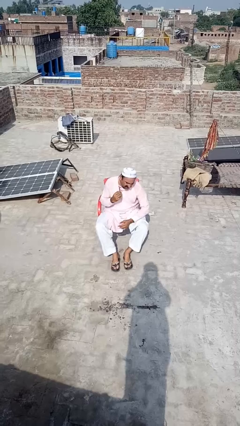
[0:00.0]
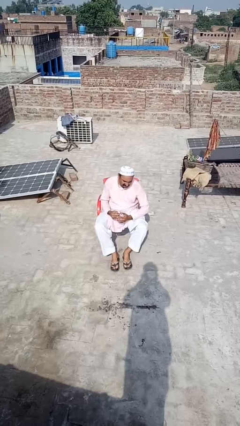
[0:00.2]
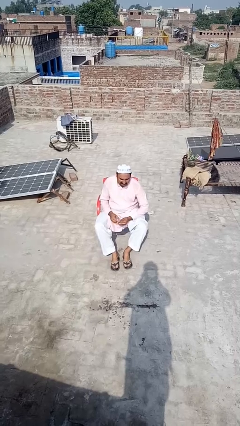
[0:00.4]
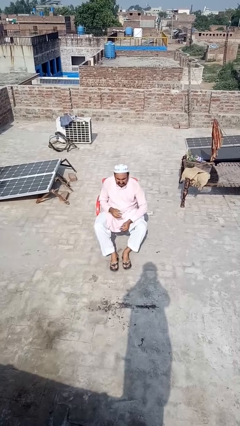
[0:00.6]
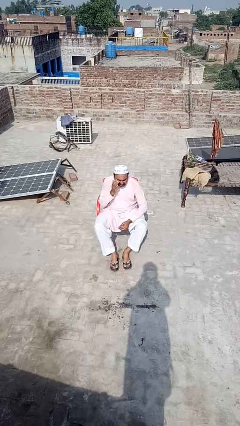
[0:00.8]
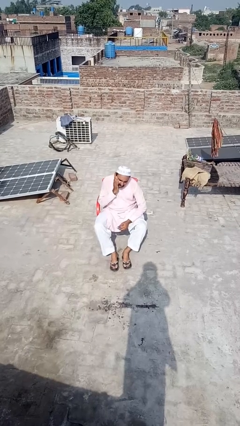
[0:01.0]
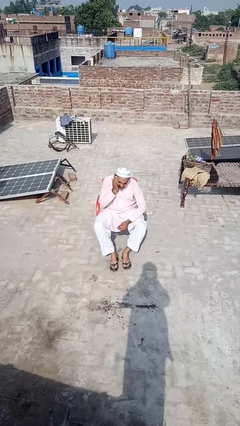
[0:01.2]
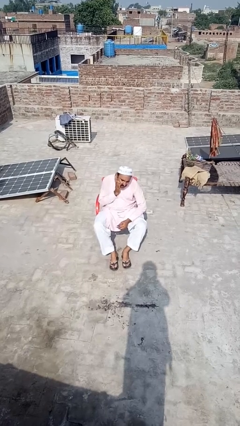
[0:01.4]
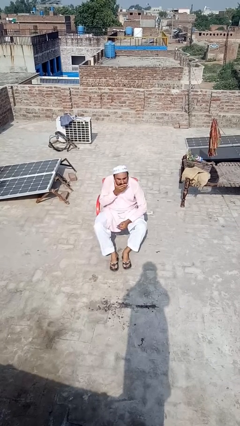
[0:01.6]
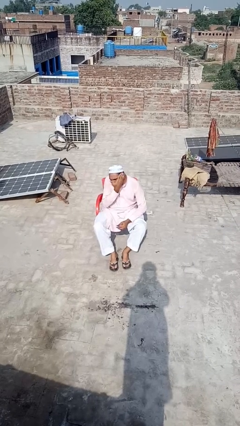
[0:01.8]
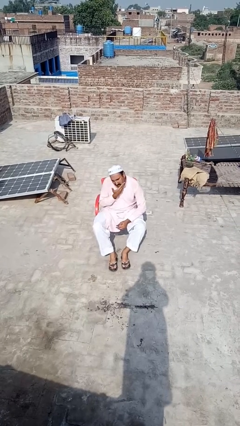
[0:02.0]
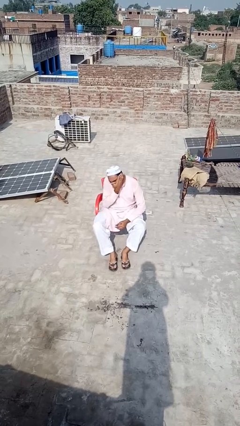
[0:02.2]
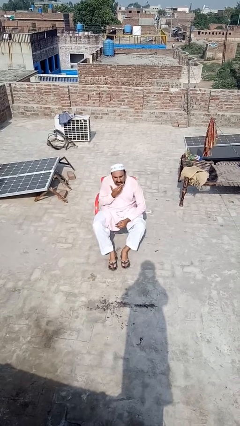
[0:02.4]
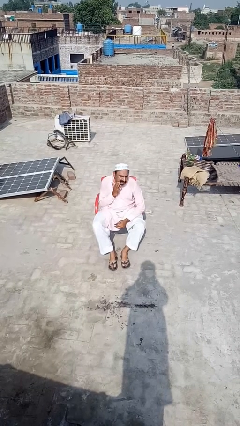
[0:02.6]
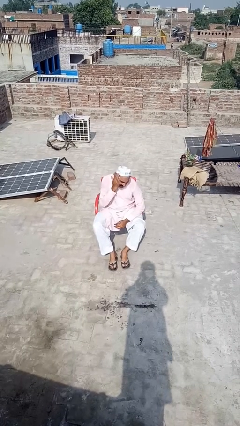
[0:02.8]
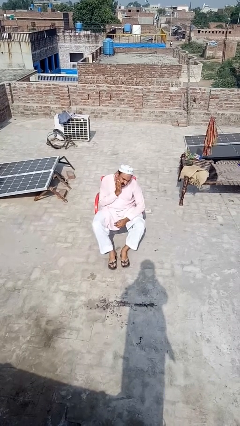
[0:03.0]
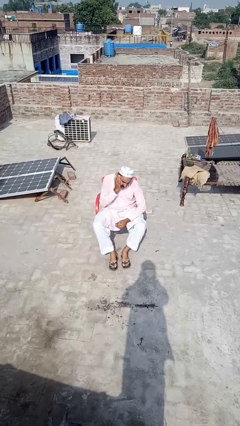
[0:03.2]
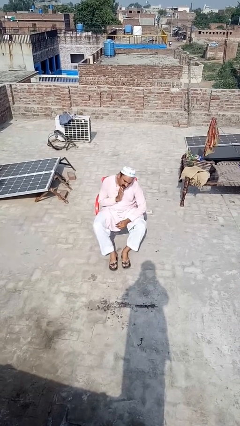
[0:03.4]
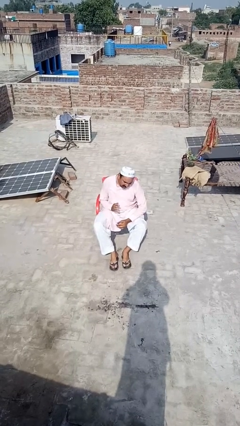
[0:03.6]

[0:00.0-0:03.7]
person applies shaving cream

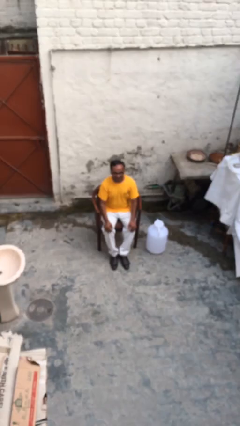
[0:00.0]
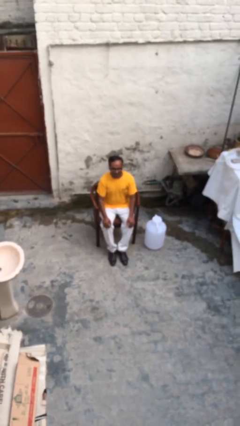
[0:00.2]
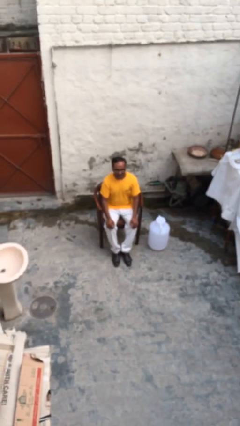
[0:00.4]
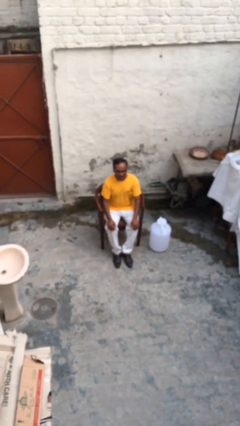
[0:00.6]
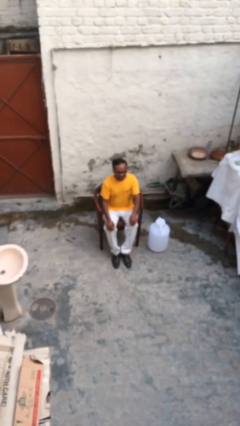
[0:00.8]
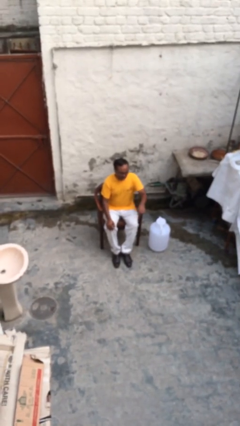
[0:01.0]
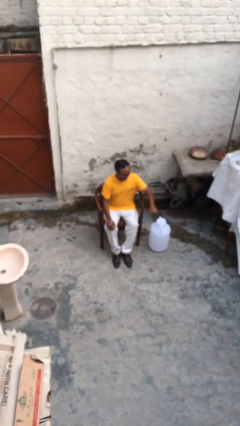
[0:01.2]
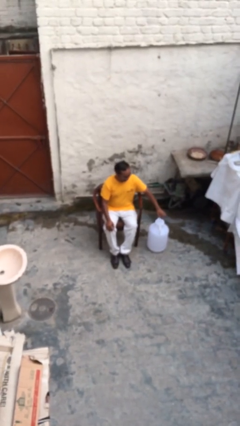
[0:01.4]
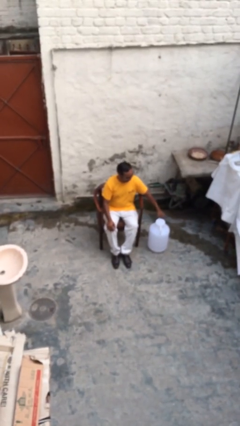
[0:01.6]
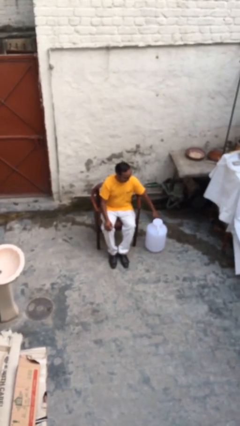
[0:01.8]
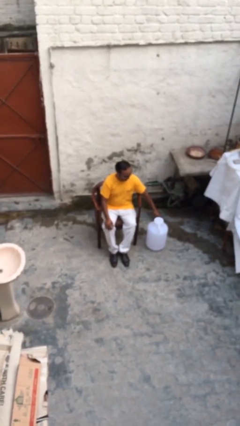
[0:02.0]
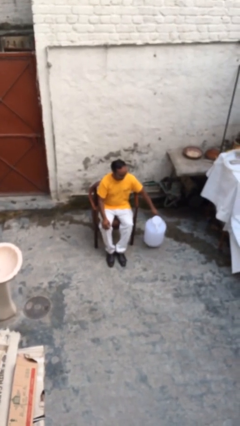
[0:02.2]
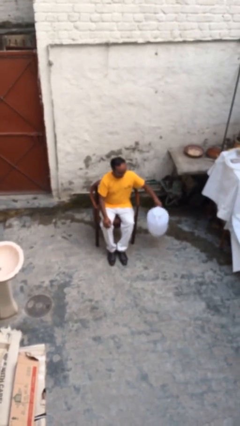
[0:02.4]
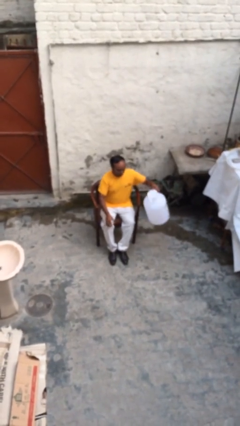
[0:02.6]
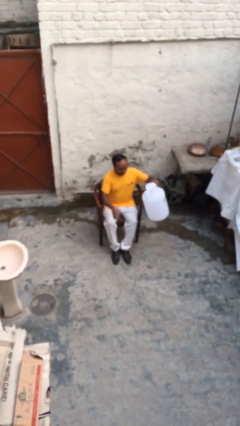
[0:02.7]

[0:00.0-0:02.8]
person picks up object from floor

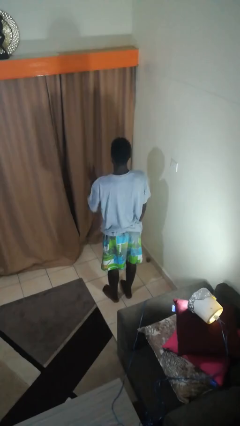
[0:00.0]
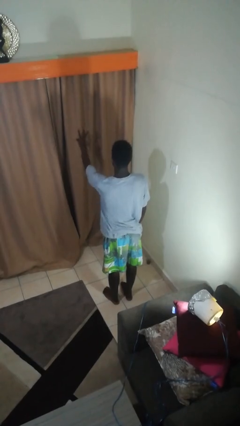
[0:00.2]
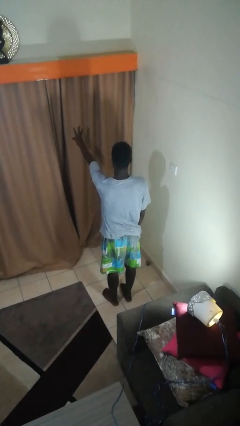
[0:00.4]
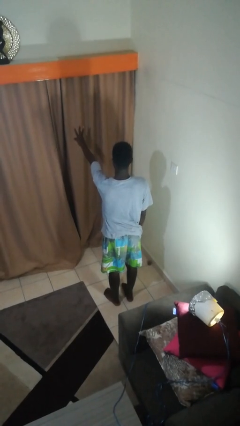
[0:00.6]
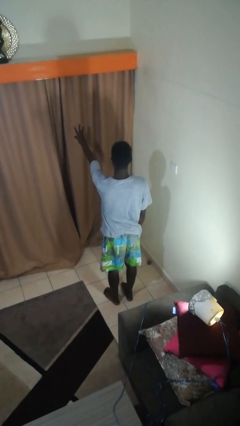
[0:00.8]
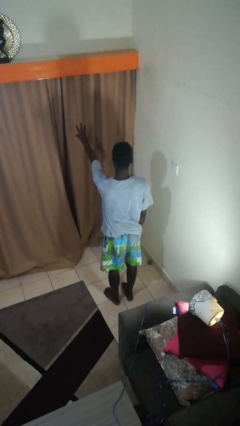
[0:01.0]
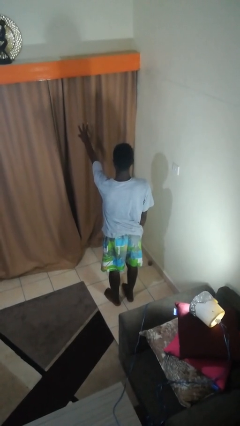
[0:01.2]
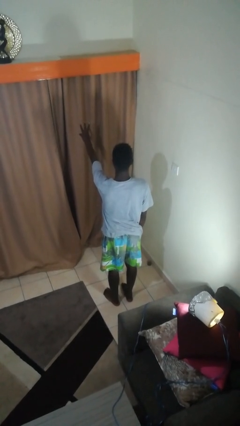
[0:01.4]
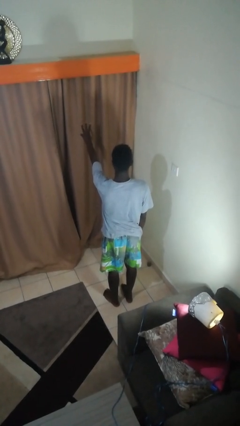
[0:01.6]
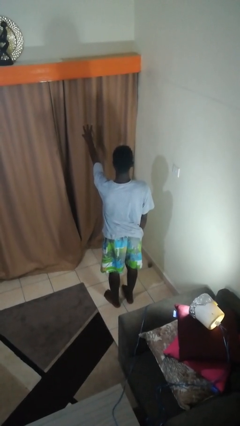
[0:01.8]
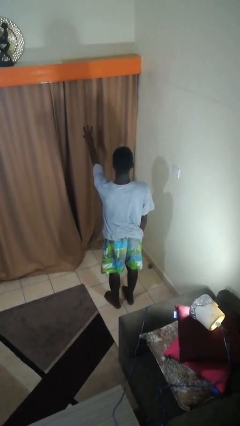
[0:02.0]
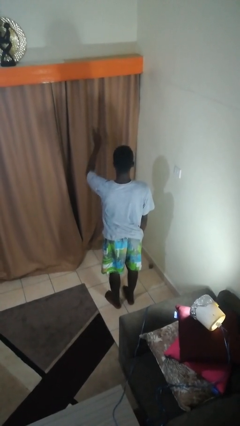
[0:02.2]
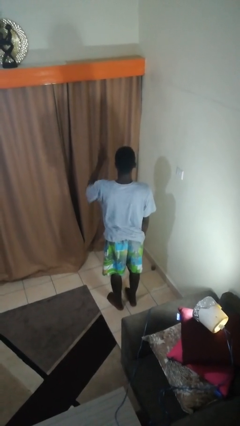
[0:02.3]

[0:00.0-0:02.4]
person gestures number three

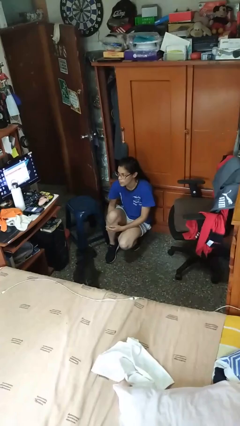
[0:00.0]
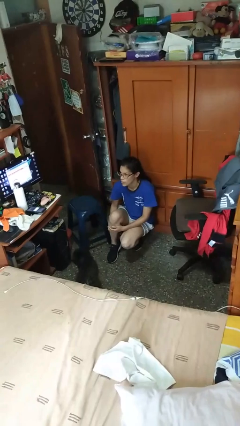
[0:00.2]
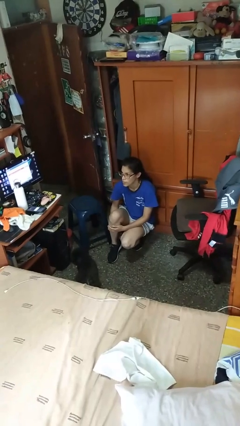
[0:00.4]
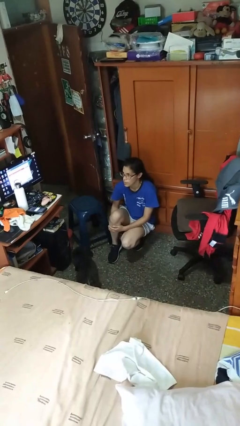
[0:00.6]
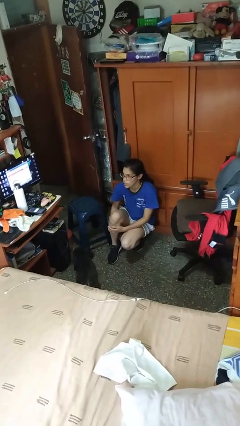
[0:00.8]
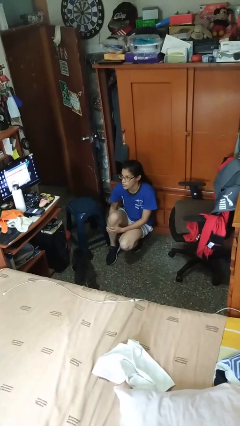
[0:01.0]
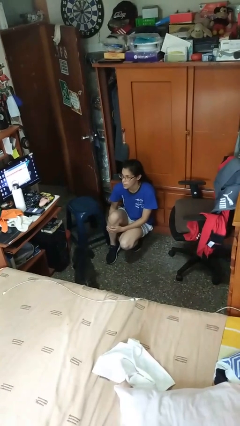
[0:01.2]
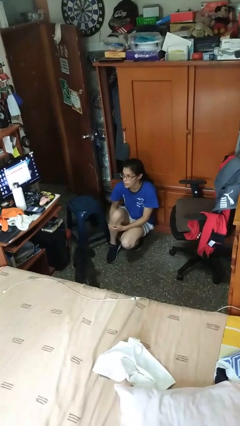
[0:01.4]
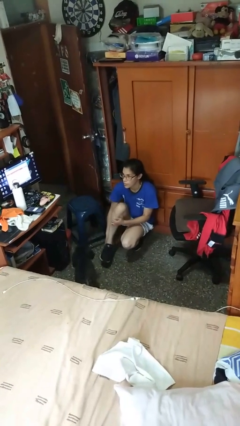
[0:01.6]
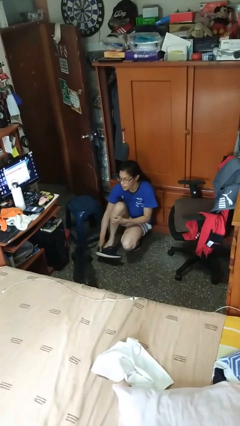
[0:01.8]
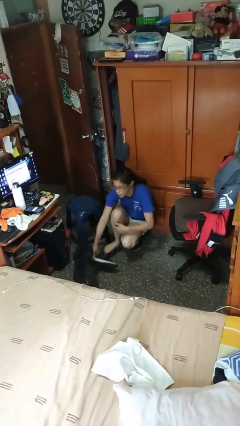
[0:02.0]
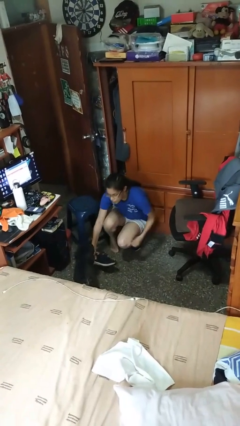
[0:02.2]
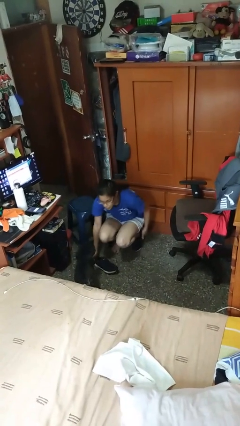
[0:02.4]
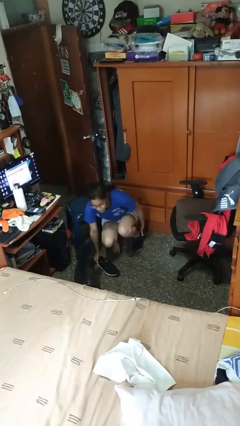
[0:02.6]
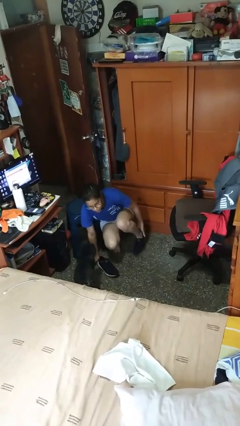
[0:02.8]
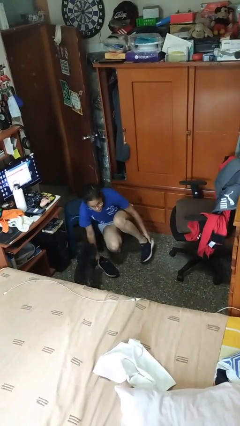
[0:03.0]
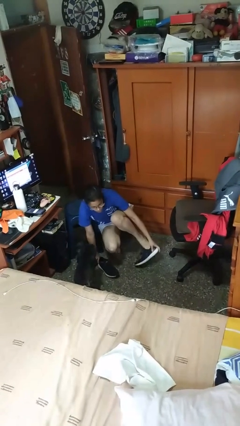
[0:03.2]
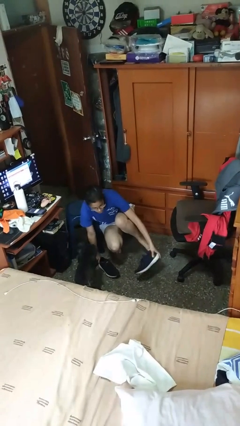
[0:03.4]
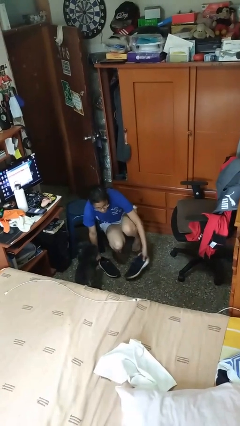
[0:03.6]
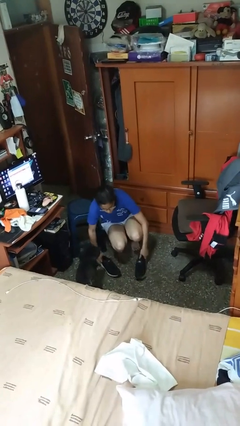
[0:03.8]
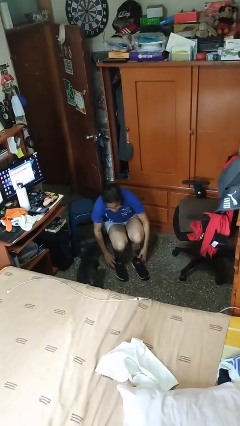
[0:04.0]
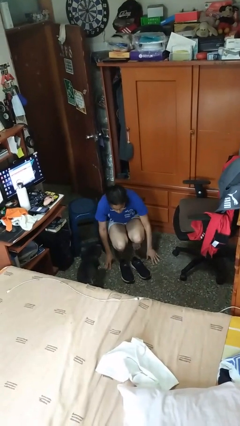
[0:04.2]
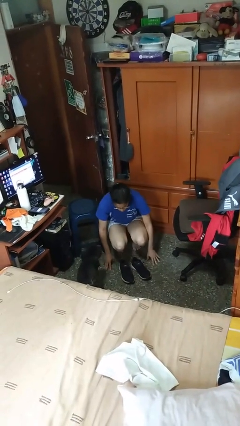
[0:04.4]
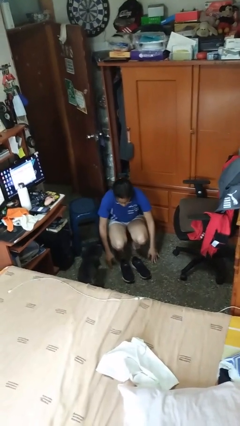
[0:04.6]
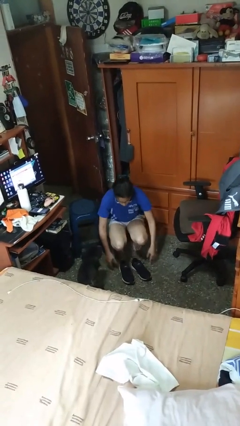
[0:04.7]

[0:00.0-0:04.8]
person takes off shoes

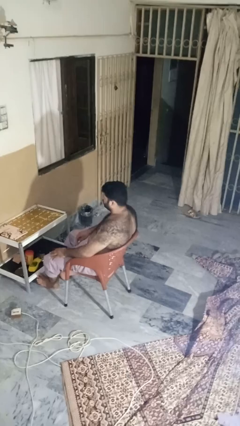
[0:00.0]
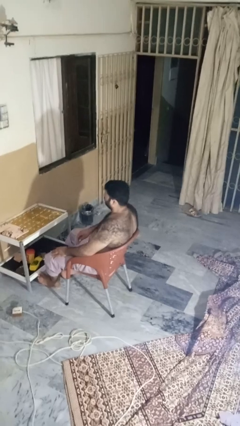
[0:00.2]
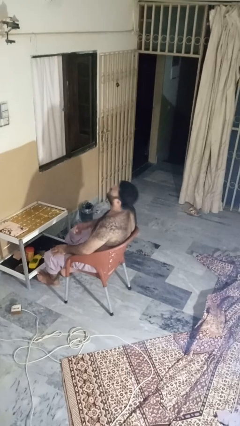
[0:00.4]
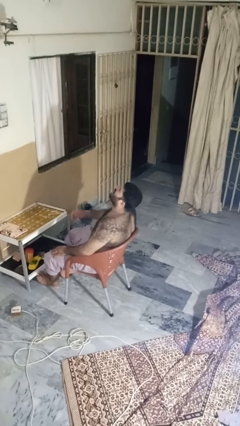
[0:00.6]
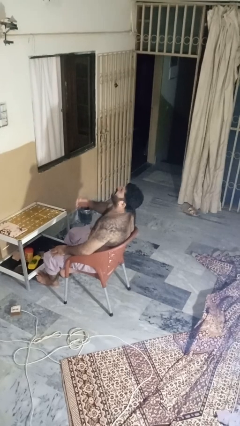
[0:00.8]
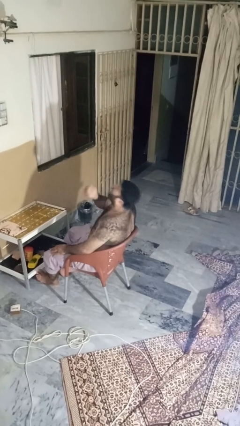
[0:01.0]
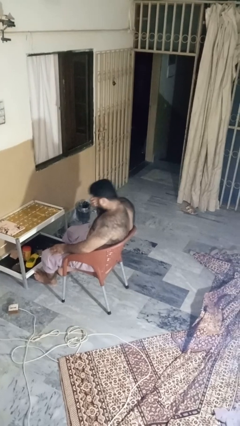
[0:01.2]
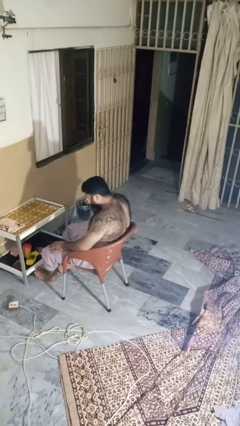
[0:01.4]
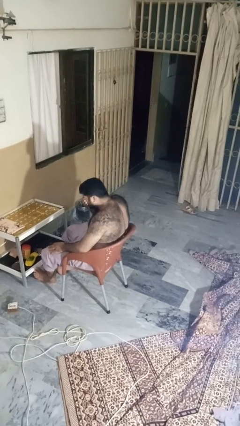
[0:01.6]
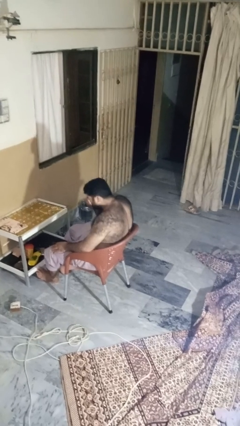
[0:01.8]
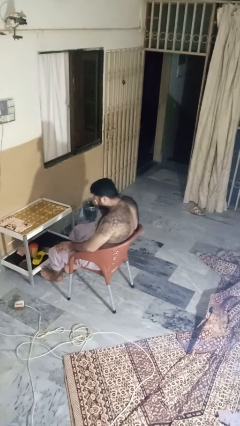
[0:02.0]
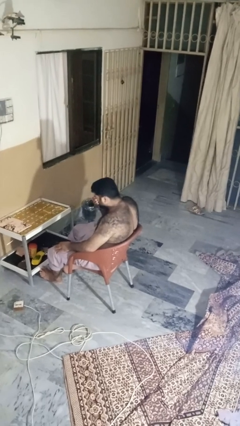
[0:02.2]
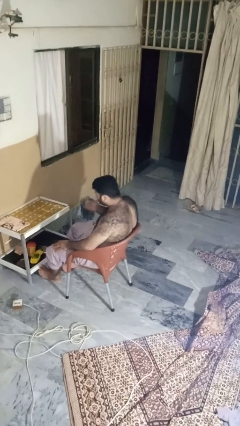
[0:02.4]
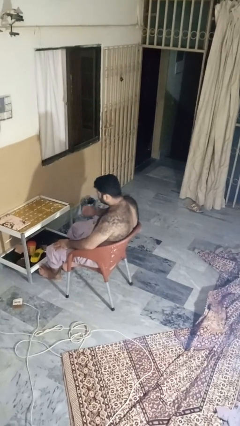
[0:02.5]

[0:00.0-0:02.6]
person sneezes into hand

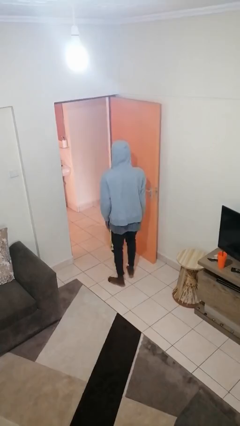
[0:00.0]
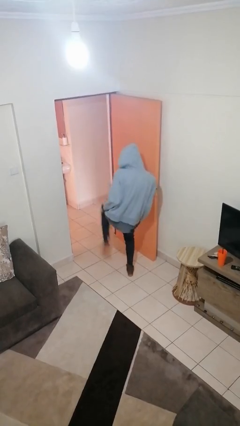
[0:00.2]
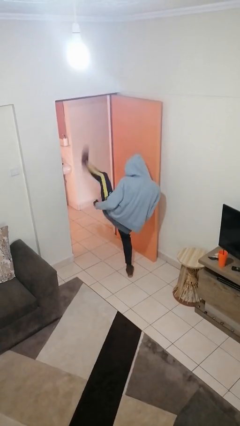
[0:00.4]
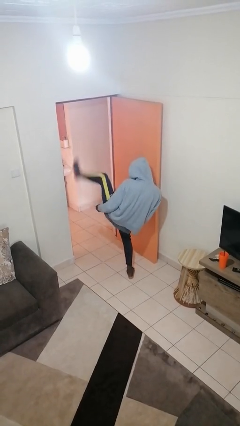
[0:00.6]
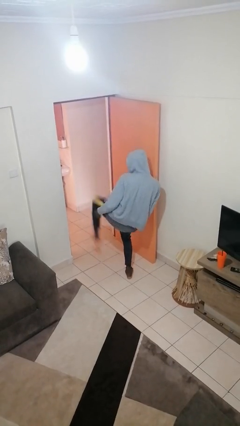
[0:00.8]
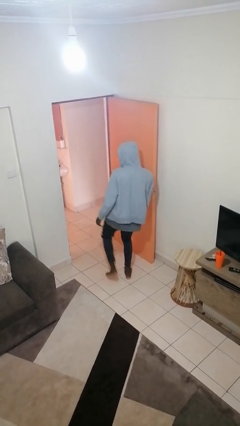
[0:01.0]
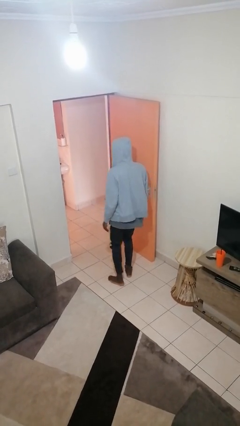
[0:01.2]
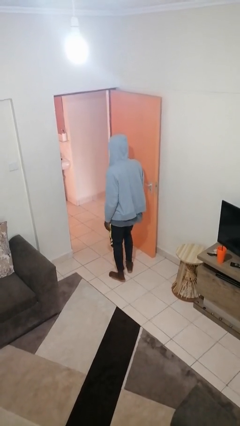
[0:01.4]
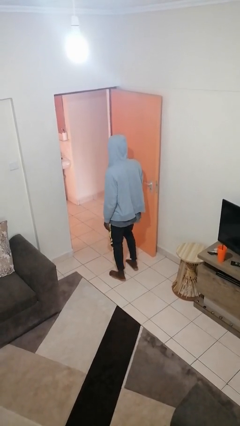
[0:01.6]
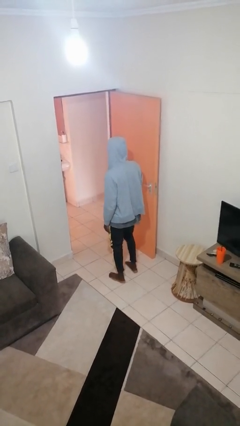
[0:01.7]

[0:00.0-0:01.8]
person karate kicks
